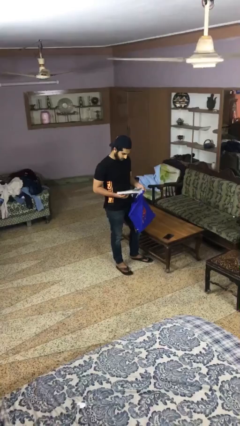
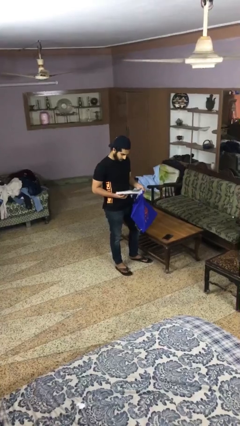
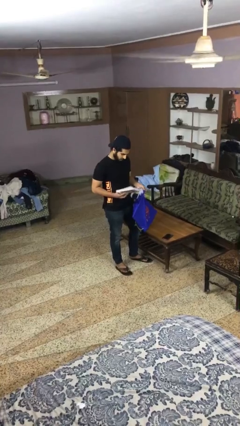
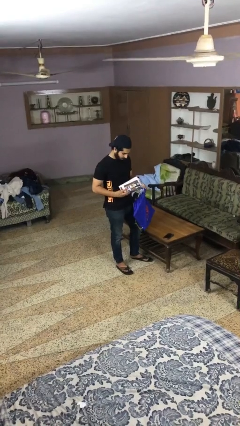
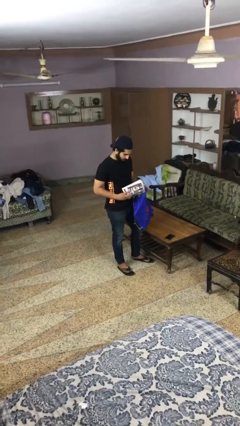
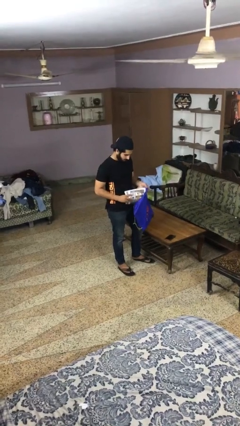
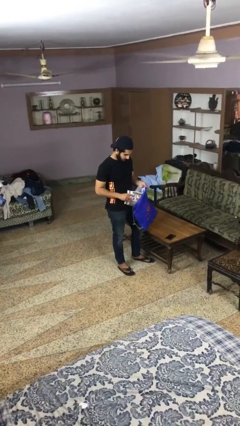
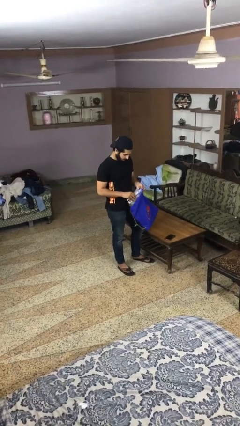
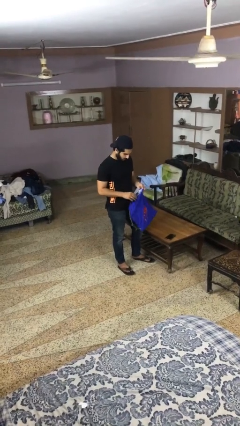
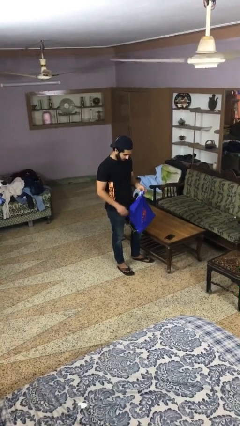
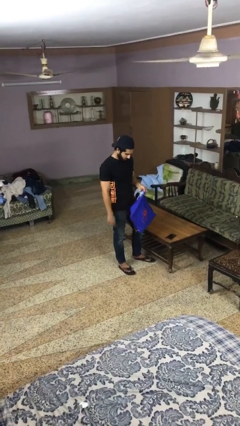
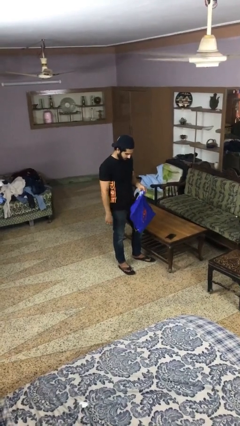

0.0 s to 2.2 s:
person puts object into bag

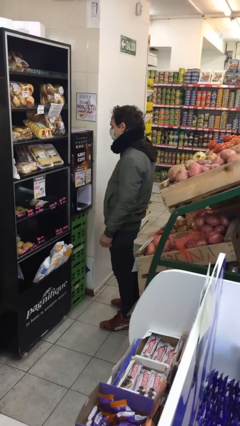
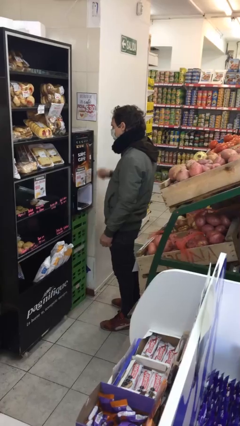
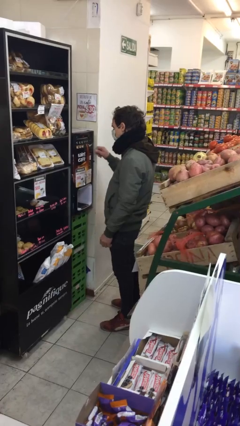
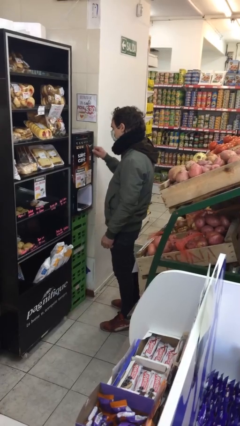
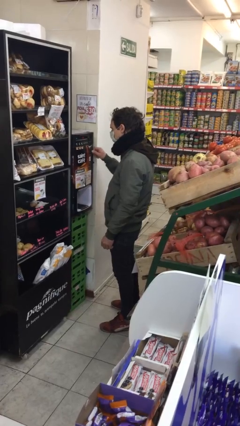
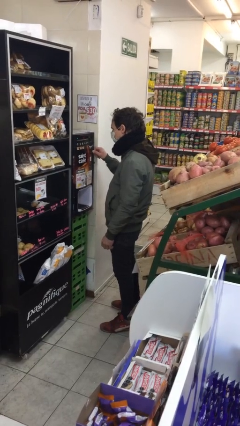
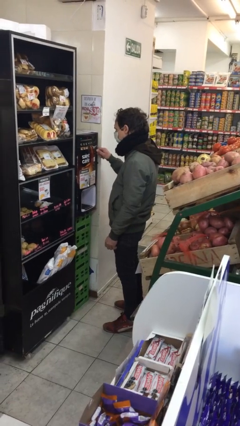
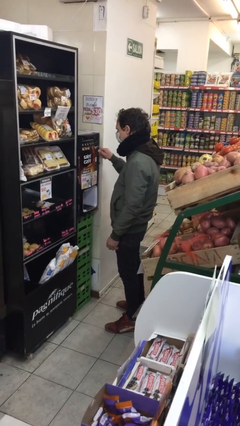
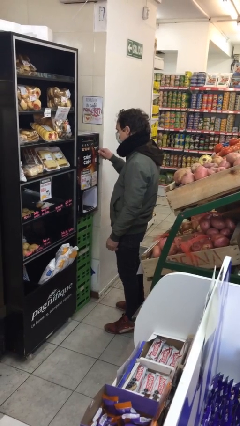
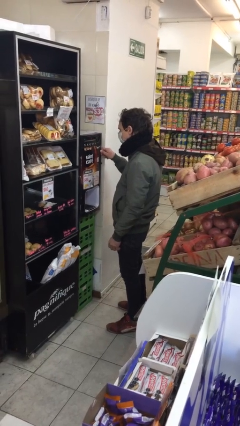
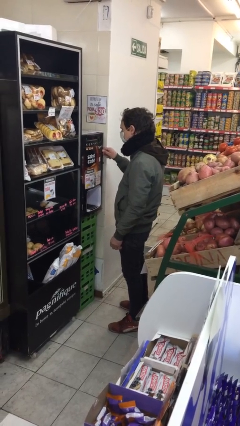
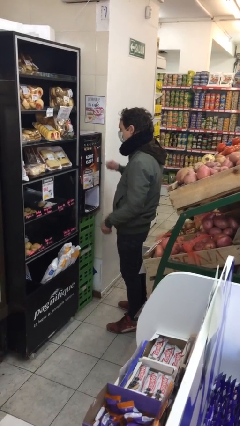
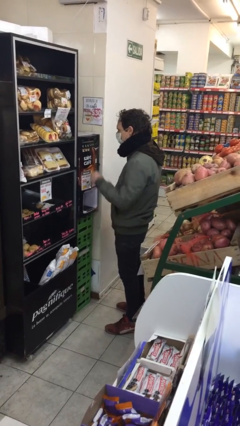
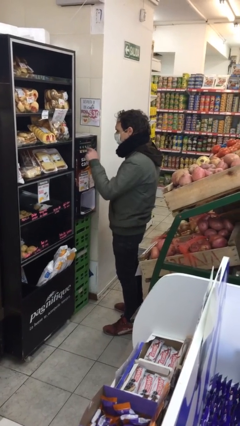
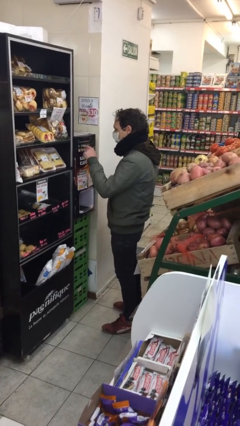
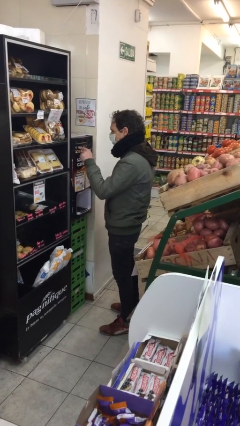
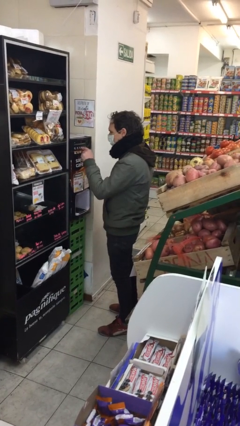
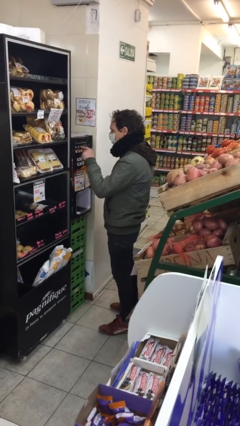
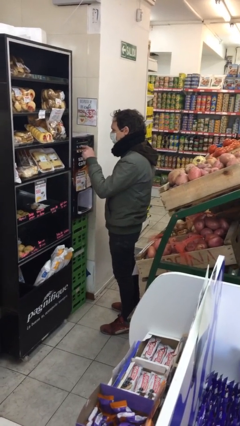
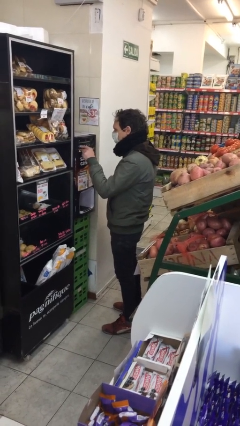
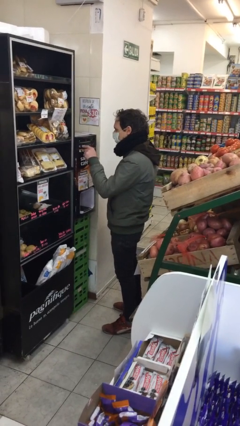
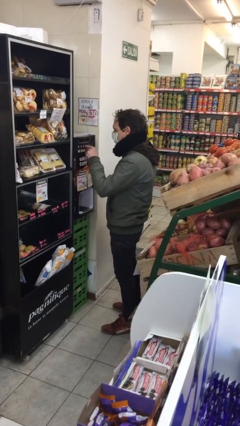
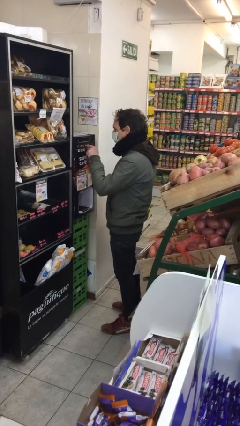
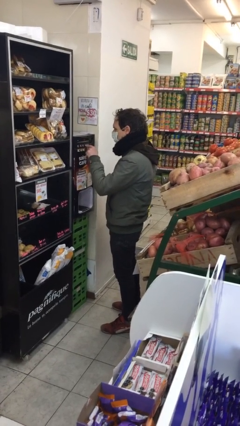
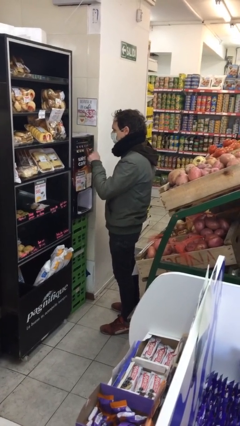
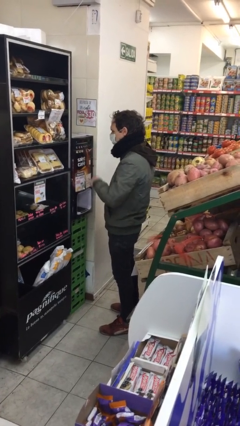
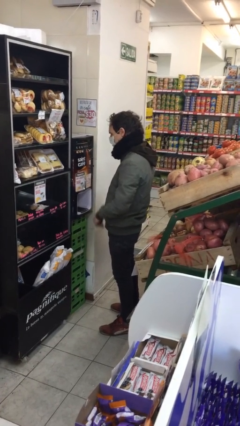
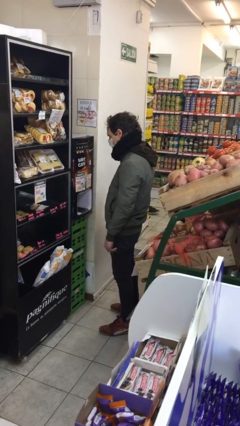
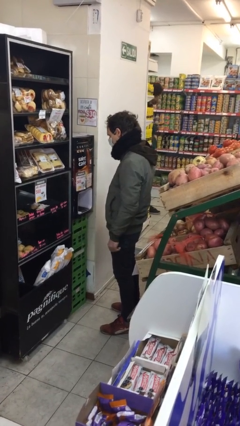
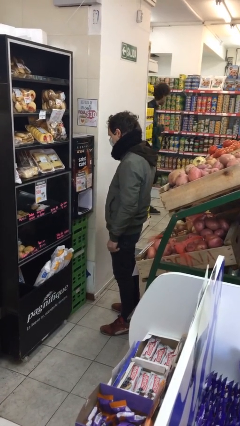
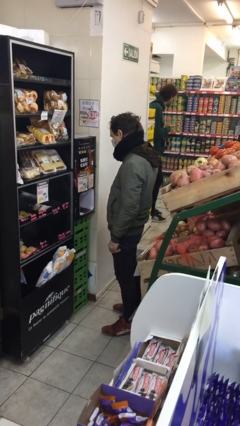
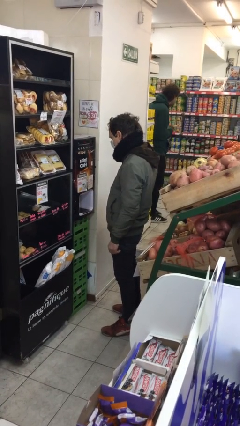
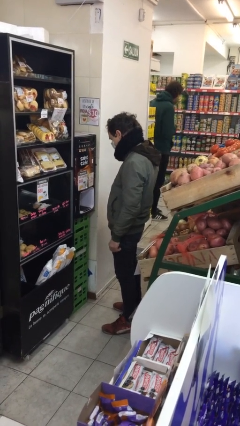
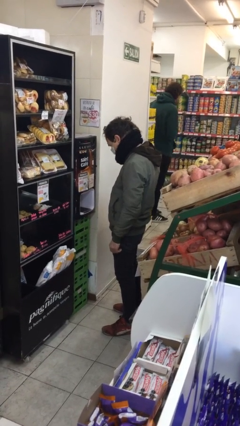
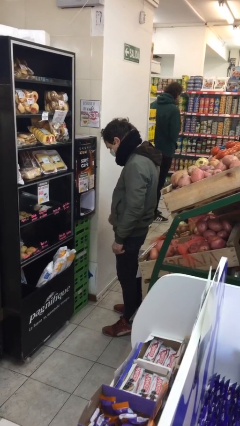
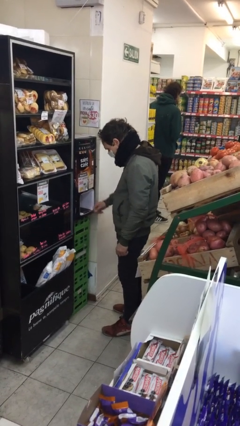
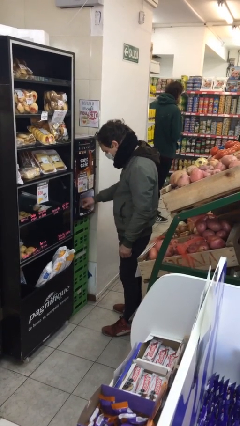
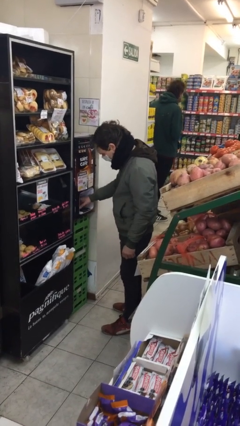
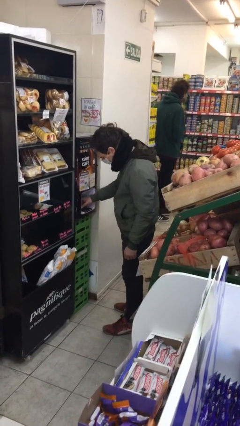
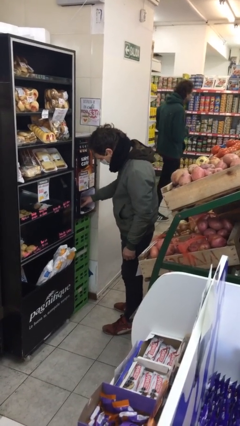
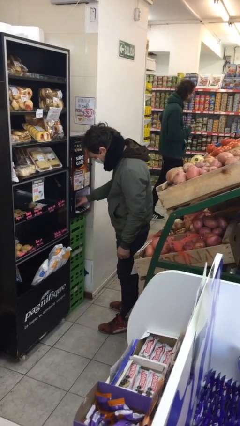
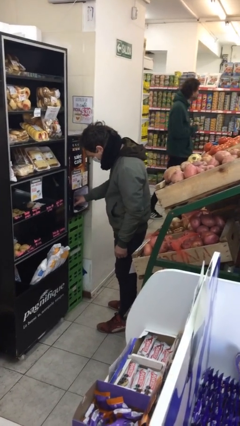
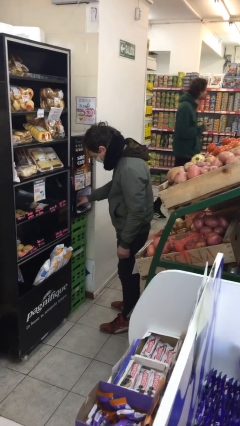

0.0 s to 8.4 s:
person purchases from machine

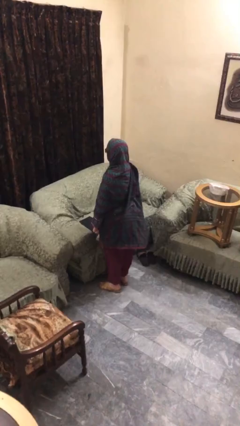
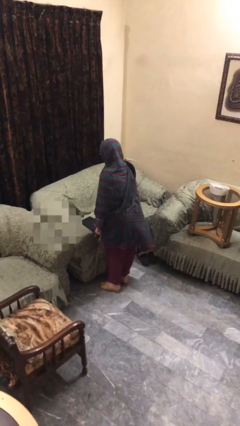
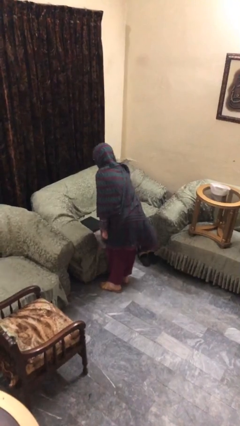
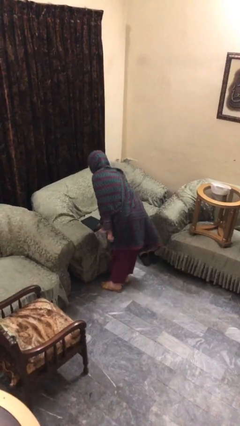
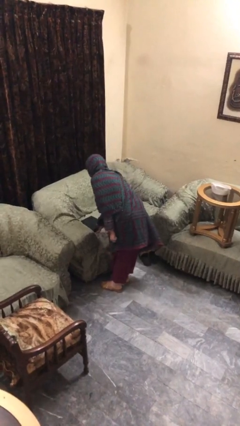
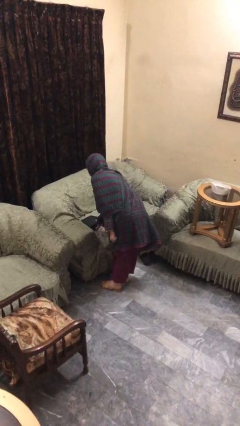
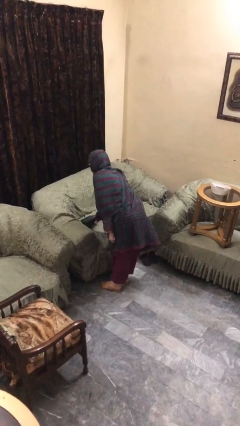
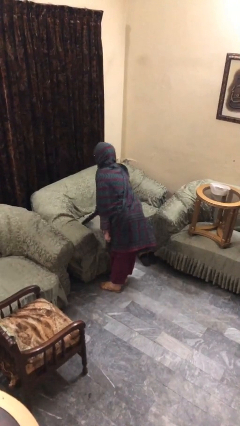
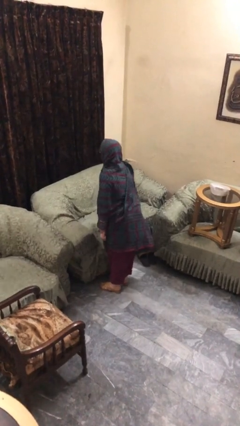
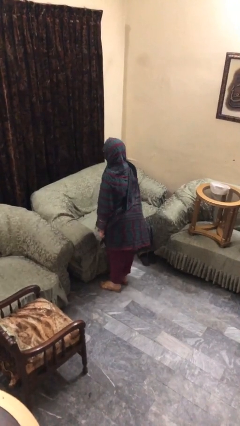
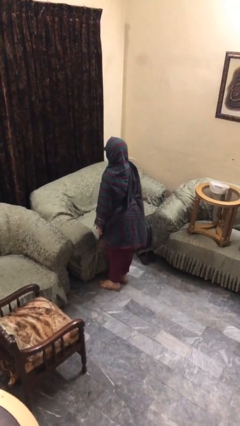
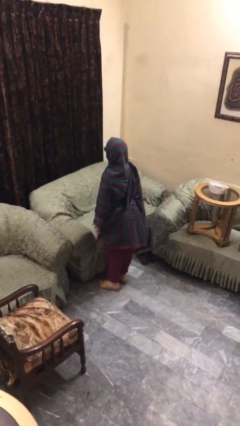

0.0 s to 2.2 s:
person picks up object from couch

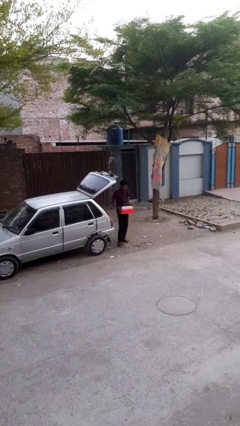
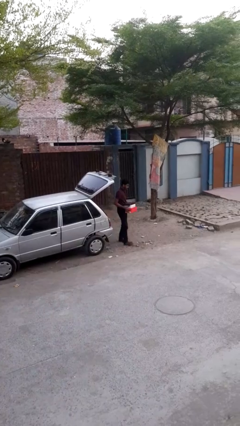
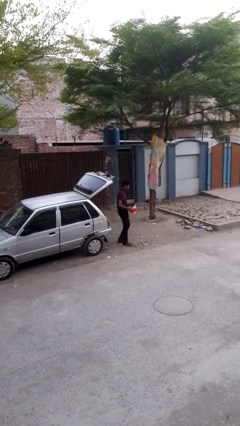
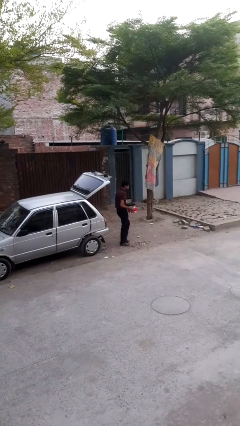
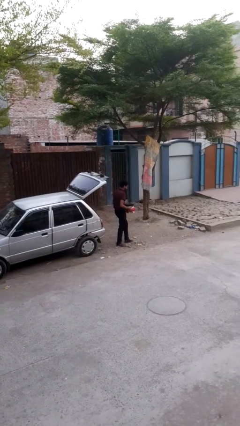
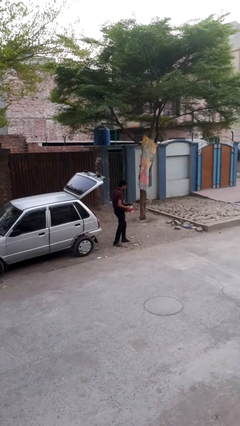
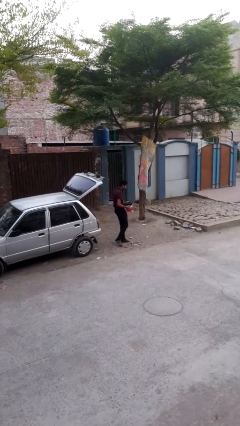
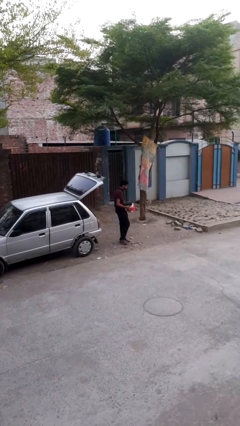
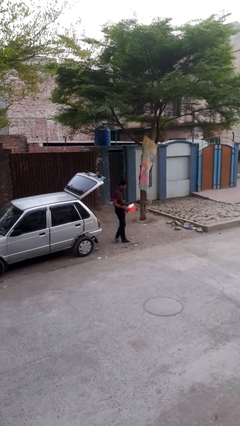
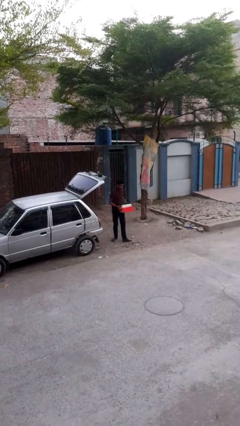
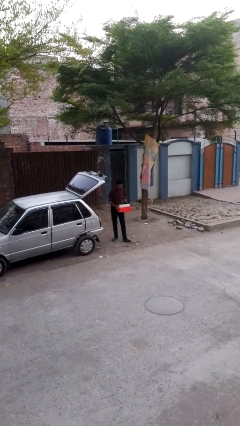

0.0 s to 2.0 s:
person unloads car

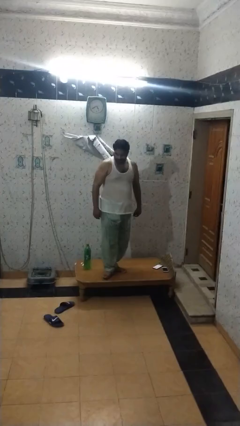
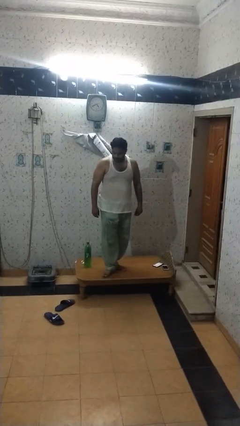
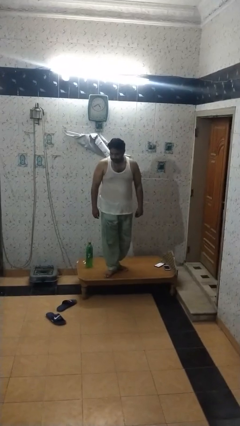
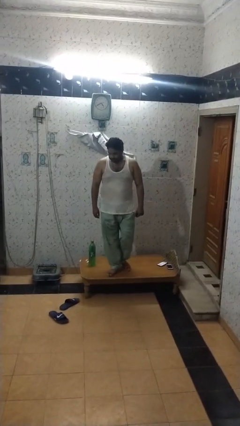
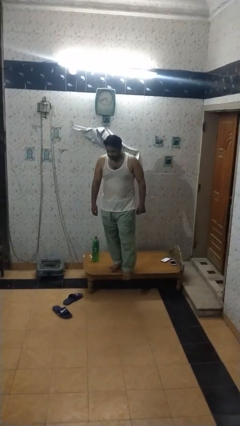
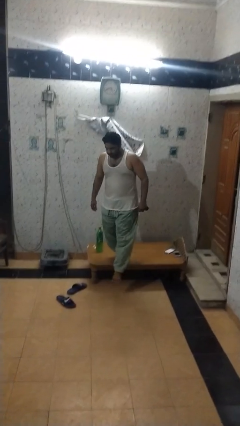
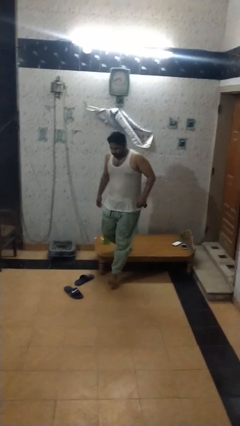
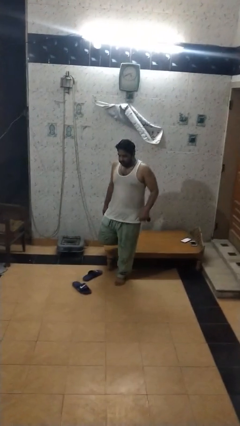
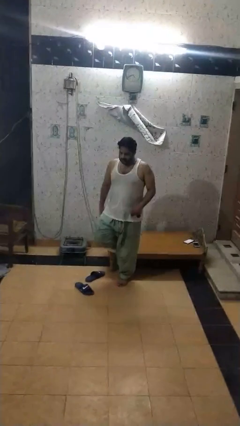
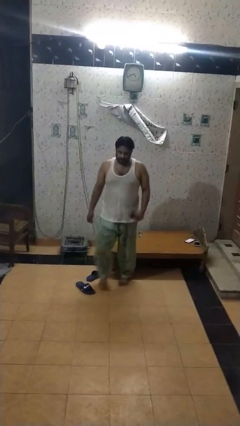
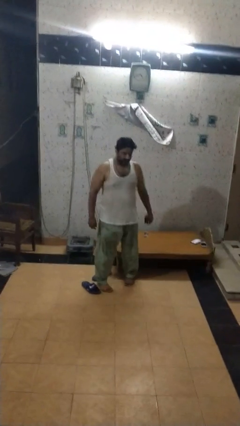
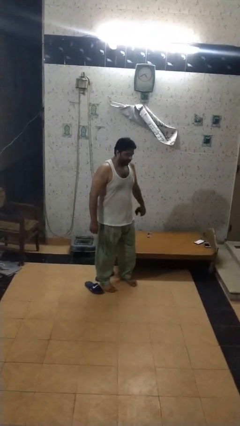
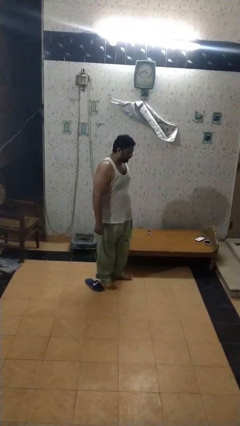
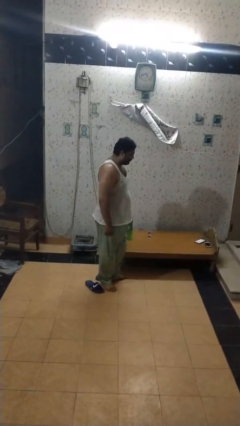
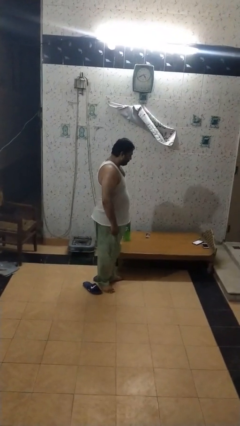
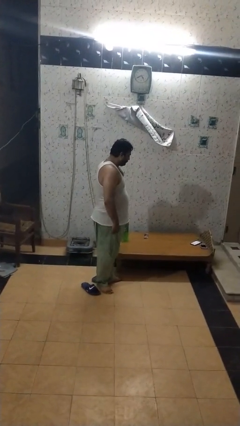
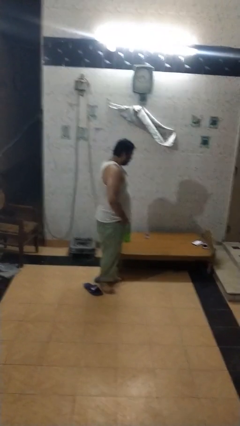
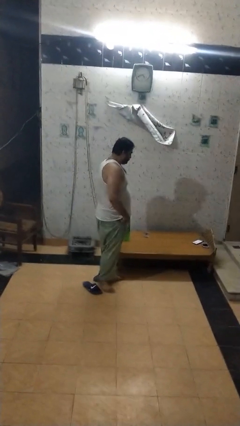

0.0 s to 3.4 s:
person climbs off table
